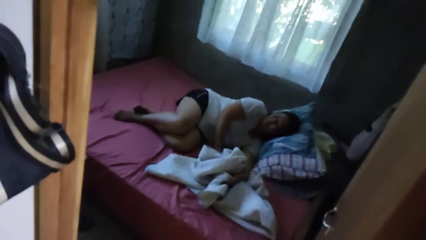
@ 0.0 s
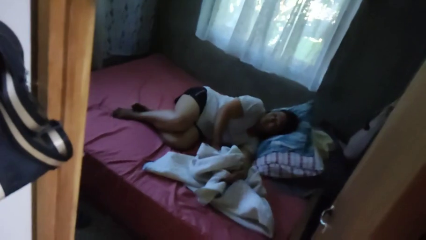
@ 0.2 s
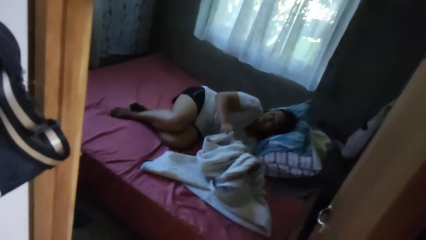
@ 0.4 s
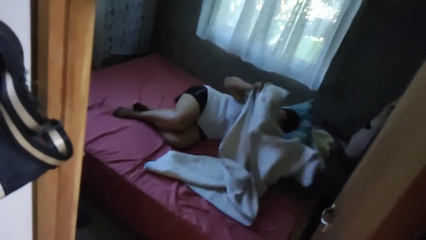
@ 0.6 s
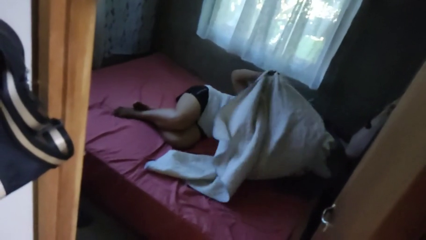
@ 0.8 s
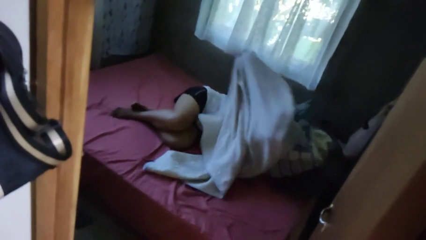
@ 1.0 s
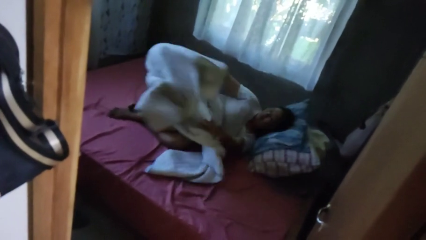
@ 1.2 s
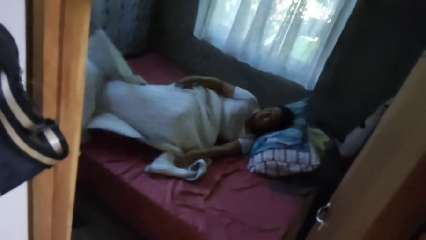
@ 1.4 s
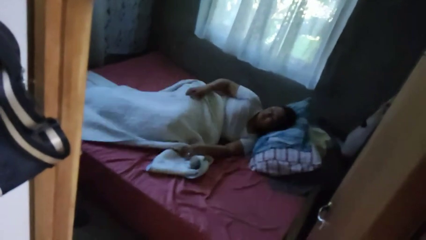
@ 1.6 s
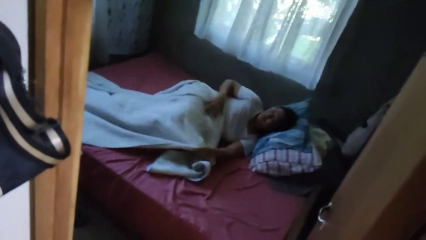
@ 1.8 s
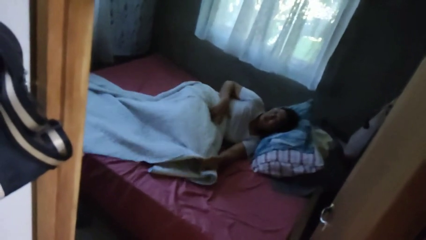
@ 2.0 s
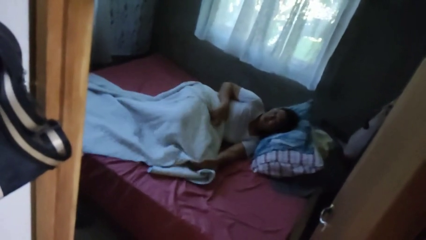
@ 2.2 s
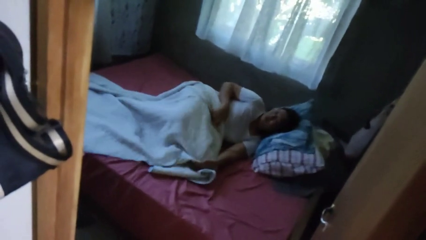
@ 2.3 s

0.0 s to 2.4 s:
person covers with bedsheets

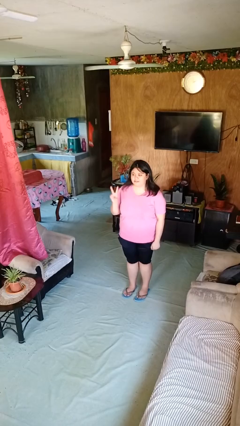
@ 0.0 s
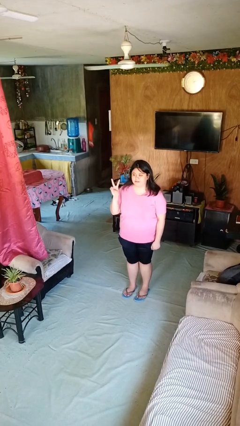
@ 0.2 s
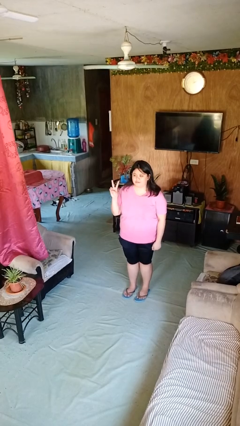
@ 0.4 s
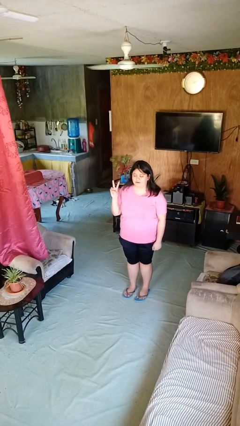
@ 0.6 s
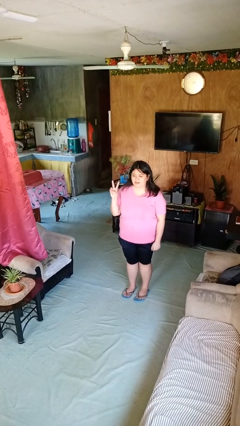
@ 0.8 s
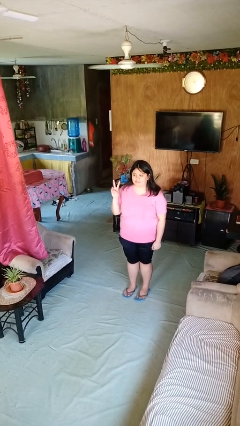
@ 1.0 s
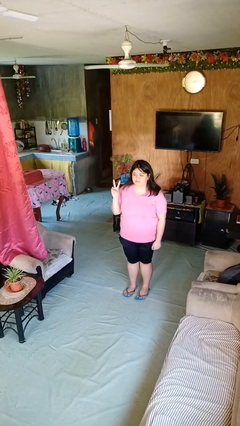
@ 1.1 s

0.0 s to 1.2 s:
person gestures peace

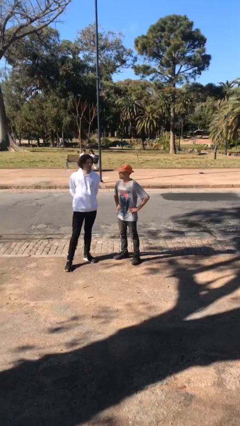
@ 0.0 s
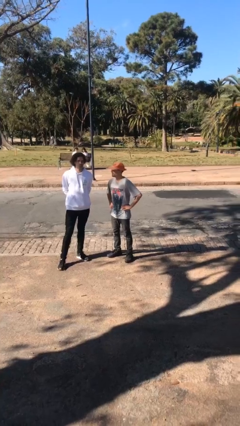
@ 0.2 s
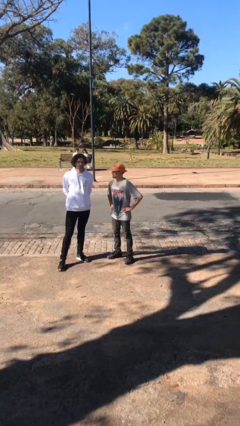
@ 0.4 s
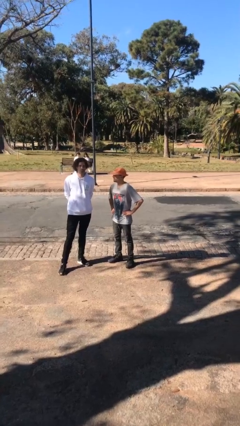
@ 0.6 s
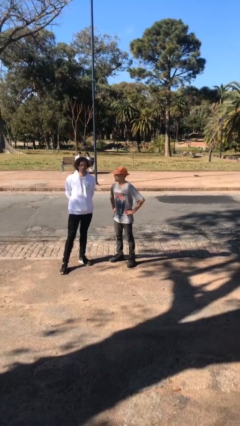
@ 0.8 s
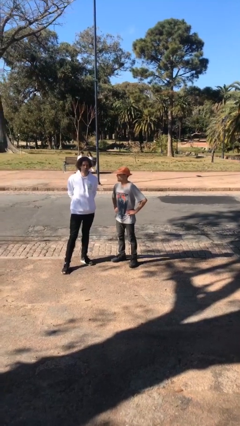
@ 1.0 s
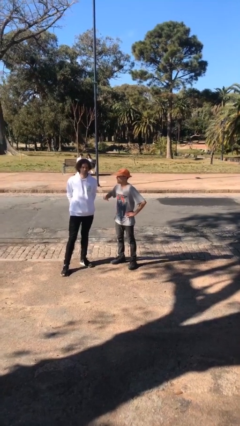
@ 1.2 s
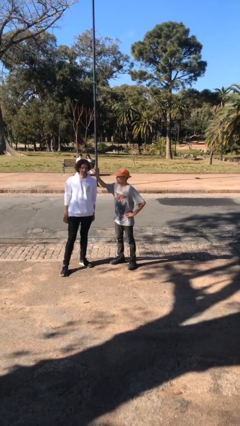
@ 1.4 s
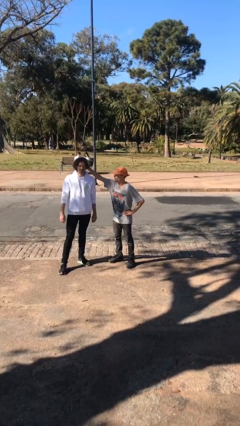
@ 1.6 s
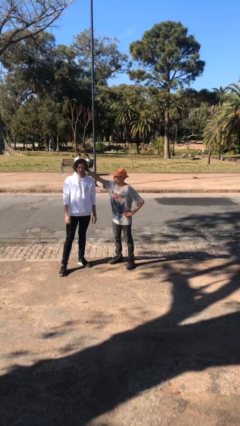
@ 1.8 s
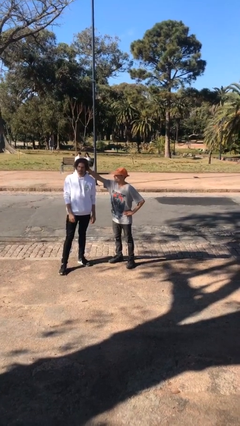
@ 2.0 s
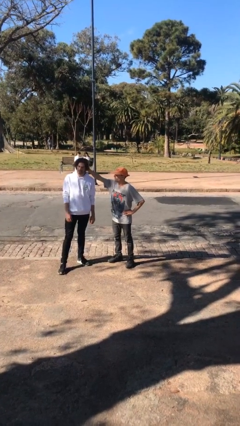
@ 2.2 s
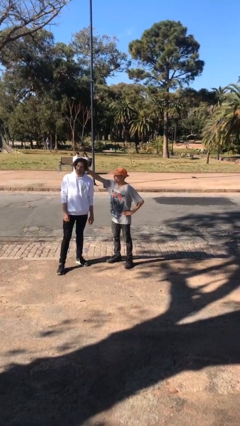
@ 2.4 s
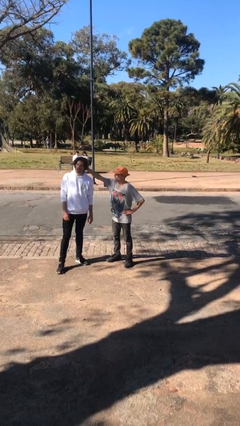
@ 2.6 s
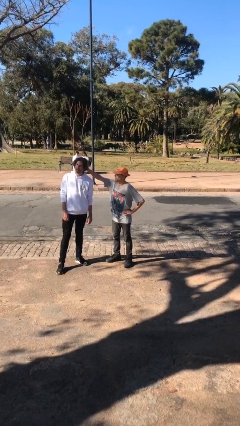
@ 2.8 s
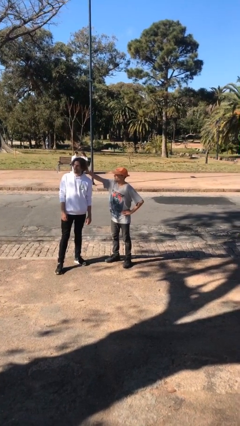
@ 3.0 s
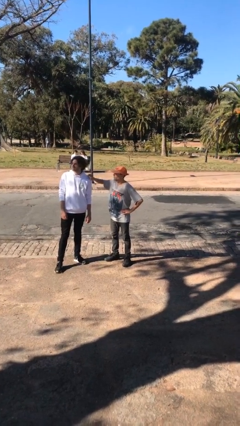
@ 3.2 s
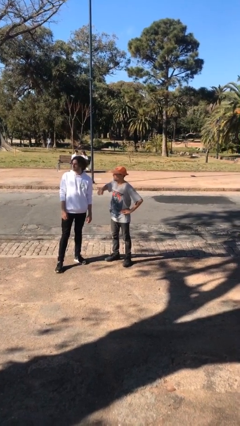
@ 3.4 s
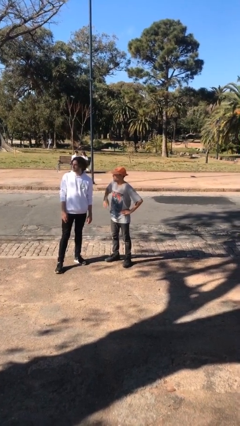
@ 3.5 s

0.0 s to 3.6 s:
person grabs person by hair

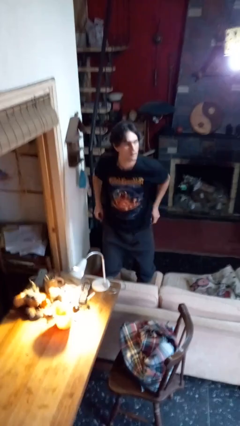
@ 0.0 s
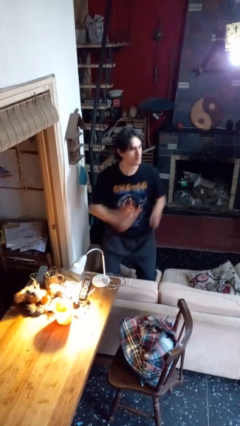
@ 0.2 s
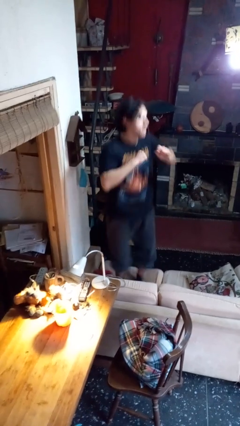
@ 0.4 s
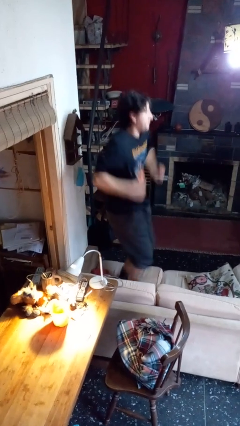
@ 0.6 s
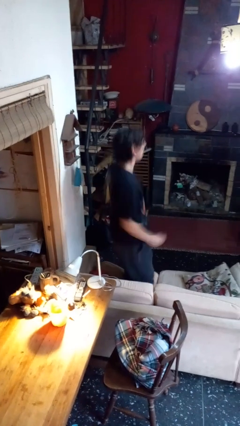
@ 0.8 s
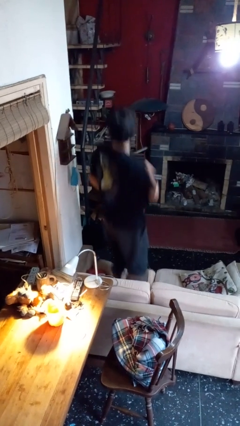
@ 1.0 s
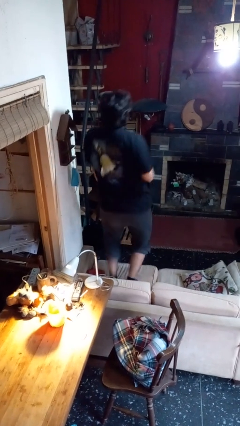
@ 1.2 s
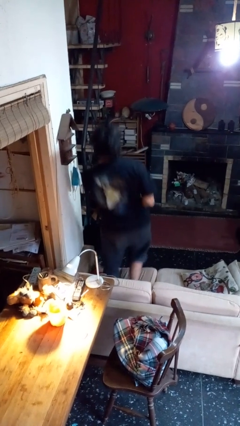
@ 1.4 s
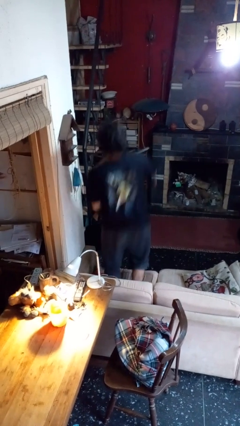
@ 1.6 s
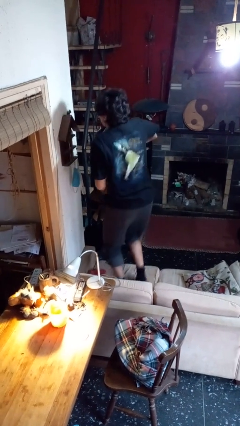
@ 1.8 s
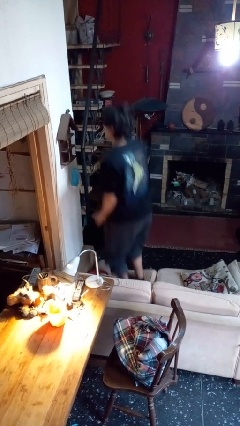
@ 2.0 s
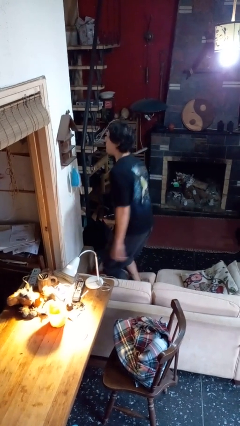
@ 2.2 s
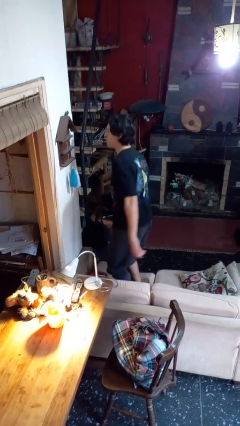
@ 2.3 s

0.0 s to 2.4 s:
person jumps on couch

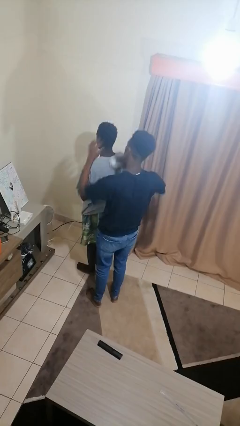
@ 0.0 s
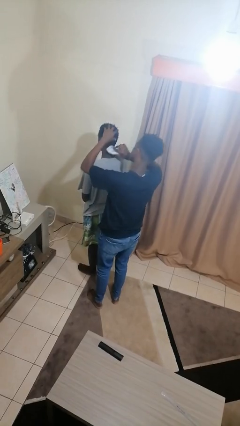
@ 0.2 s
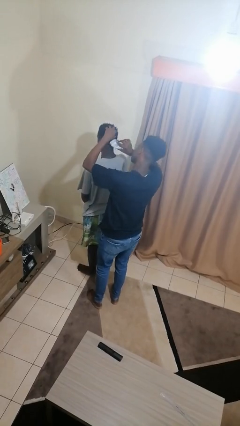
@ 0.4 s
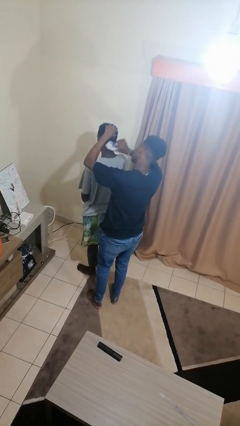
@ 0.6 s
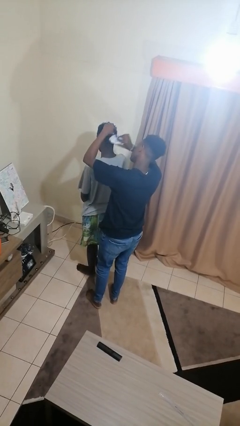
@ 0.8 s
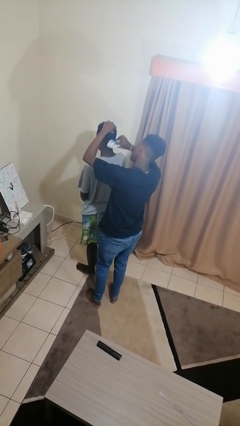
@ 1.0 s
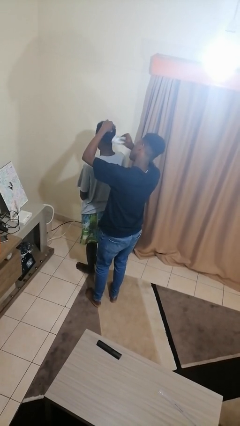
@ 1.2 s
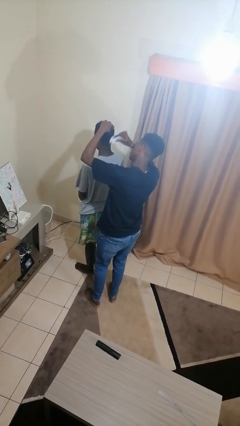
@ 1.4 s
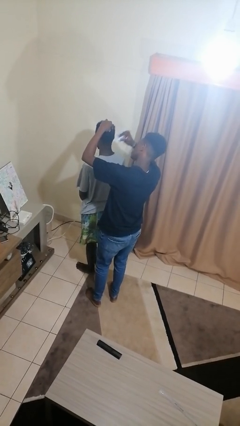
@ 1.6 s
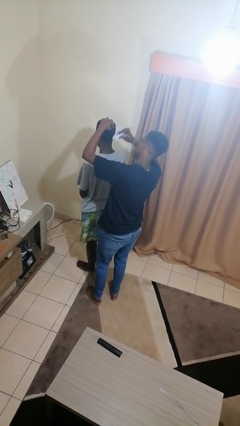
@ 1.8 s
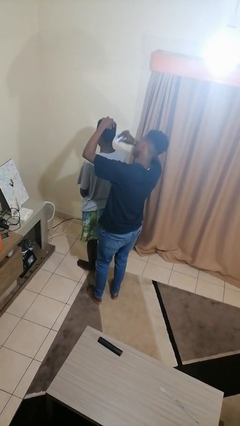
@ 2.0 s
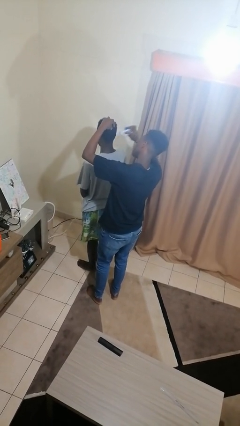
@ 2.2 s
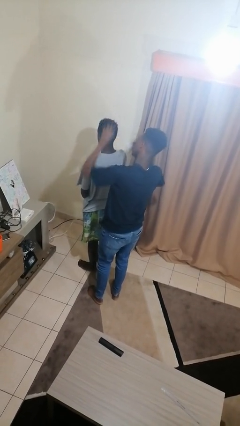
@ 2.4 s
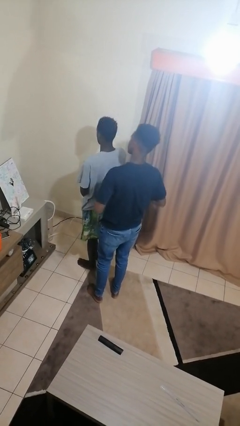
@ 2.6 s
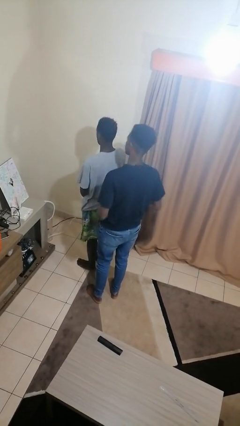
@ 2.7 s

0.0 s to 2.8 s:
person brushes hair of person

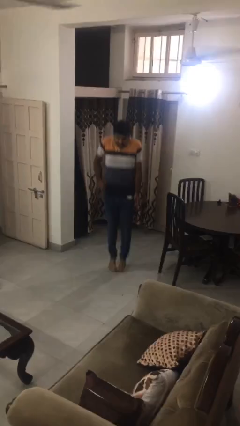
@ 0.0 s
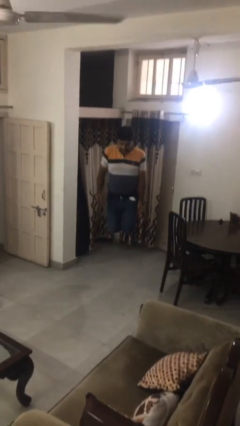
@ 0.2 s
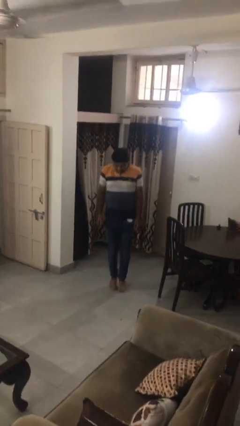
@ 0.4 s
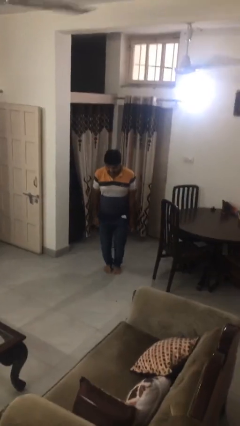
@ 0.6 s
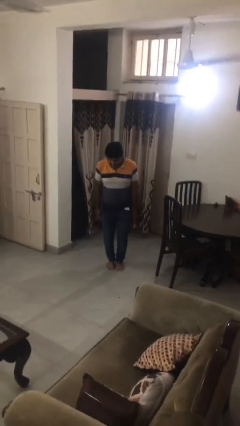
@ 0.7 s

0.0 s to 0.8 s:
person jumps

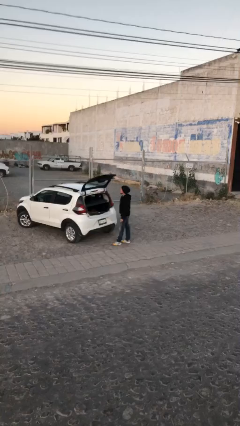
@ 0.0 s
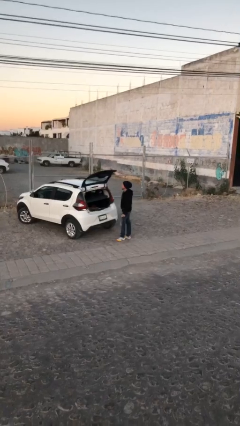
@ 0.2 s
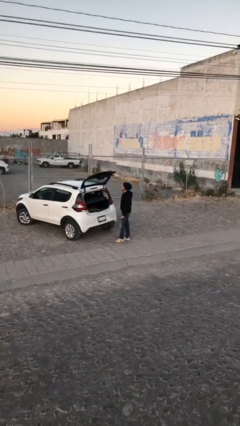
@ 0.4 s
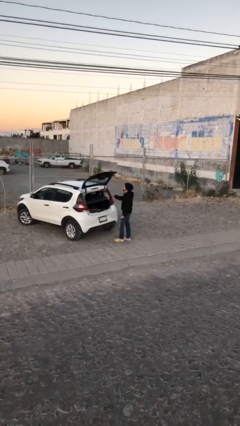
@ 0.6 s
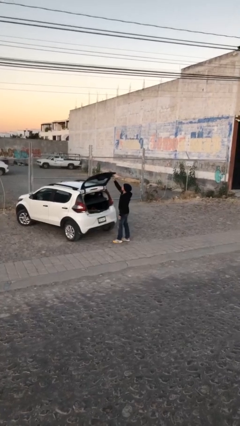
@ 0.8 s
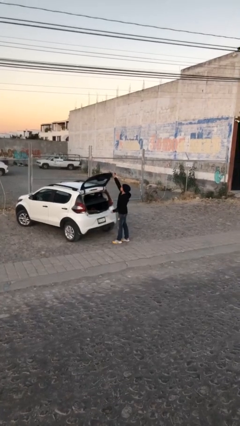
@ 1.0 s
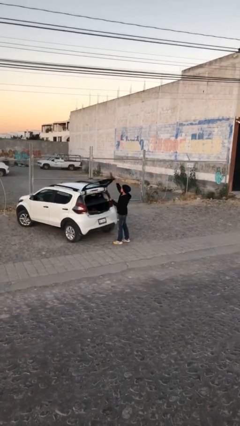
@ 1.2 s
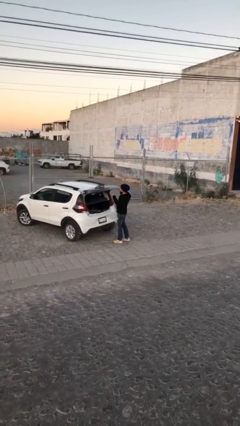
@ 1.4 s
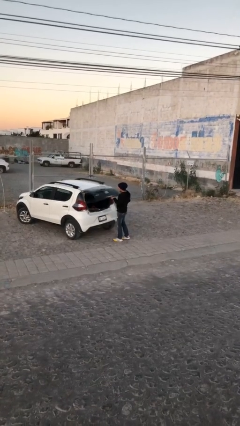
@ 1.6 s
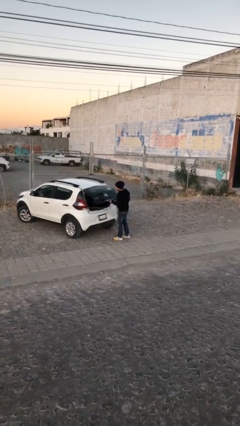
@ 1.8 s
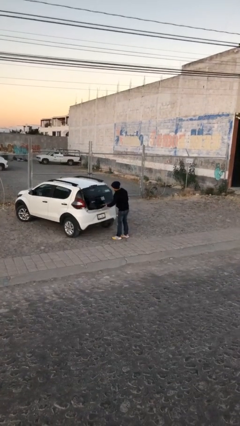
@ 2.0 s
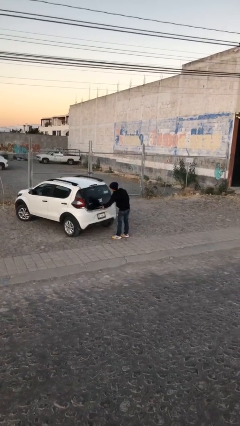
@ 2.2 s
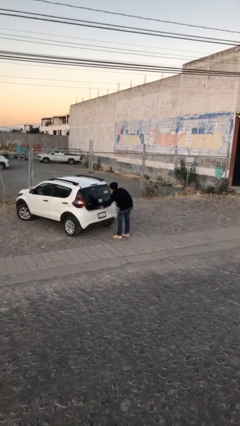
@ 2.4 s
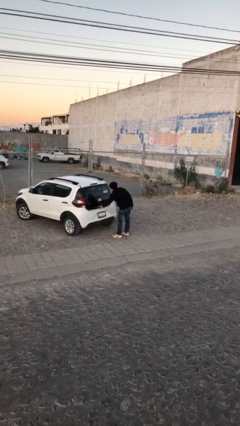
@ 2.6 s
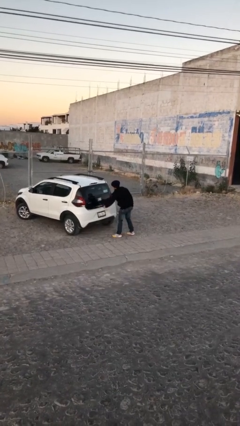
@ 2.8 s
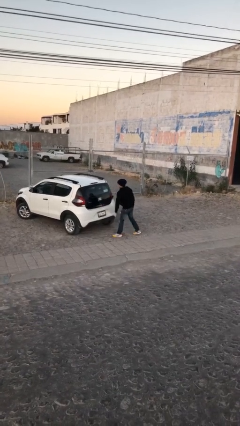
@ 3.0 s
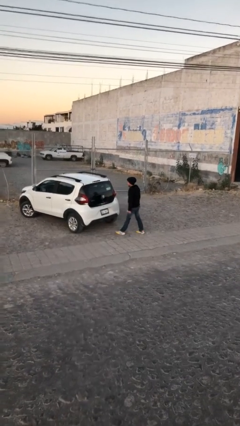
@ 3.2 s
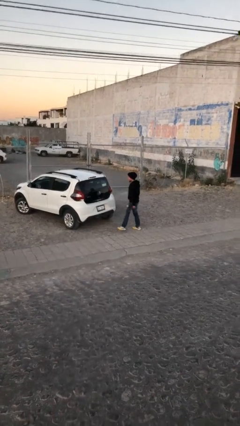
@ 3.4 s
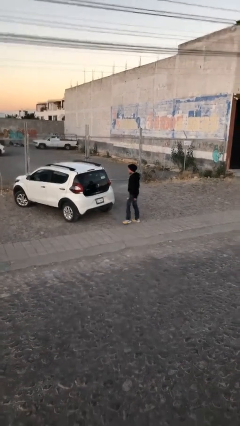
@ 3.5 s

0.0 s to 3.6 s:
person closes car trunk

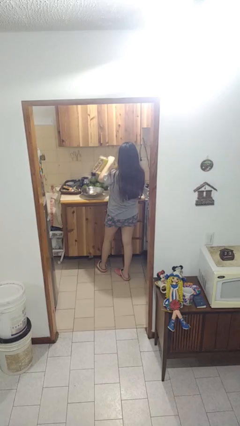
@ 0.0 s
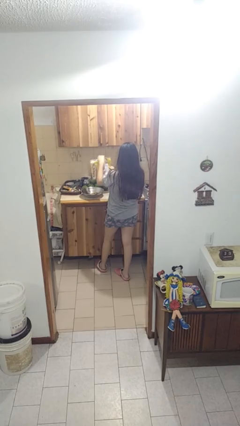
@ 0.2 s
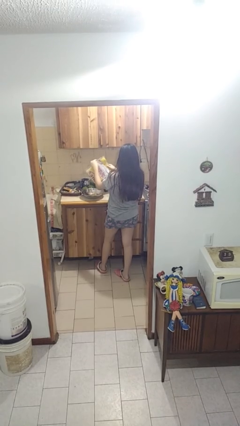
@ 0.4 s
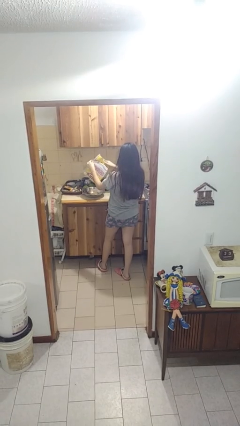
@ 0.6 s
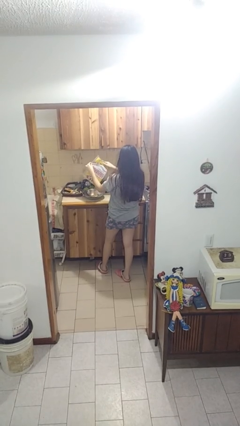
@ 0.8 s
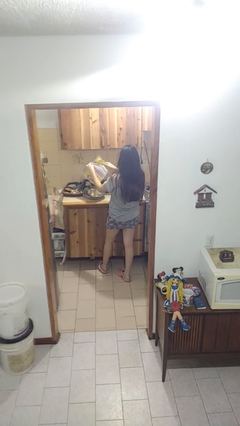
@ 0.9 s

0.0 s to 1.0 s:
person pours into bowl
